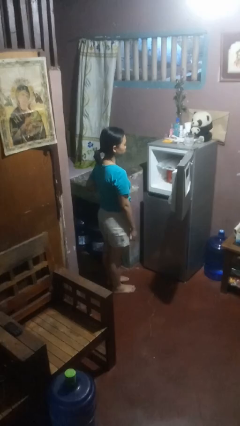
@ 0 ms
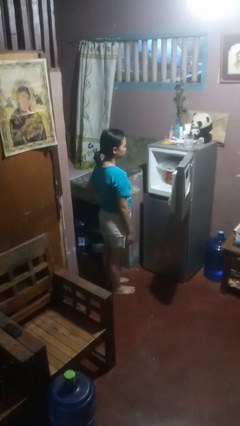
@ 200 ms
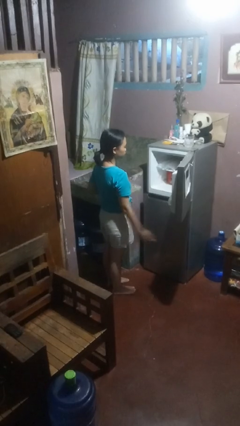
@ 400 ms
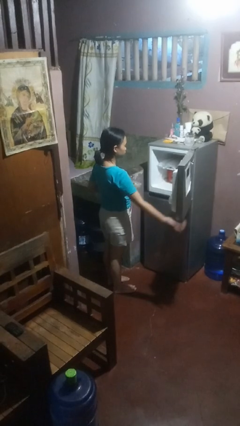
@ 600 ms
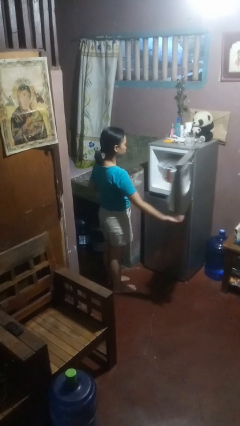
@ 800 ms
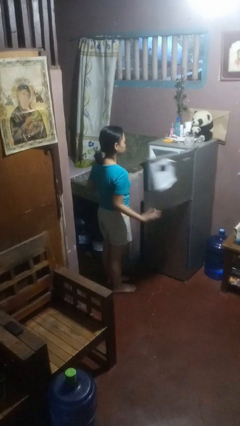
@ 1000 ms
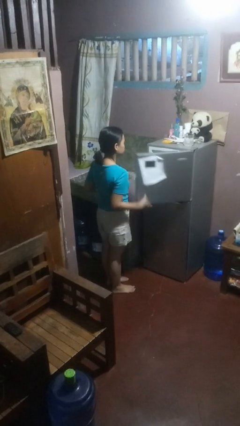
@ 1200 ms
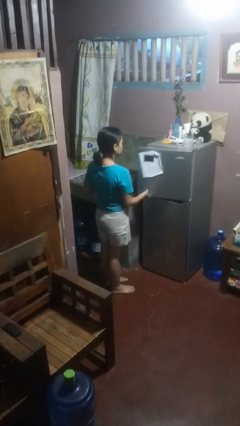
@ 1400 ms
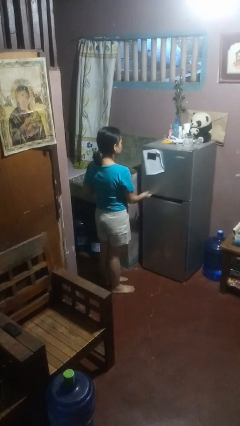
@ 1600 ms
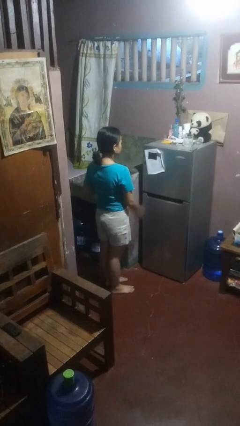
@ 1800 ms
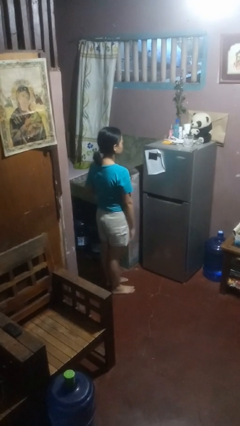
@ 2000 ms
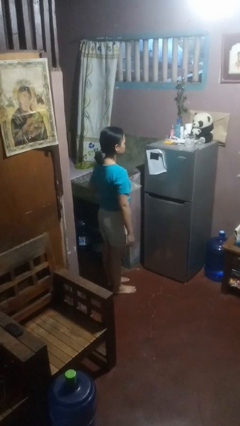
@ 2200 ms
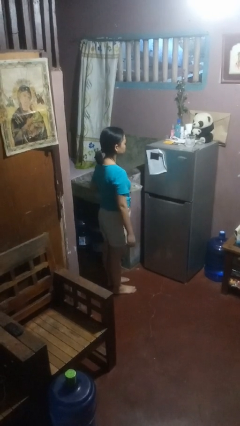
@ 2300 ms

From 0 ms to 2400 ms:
person closes refrigerator

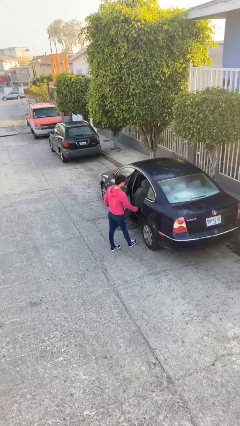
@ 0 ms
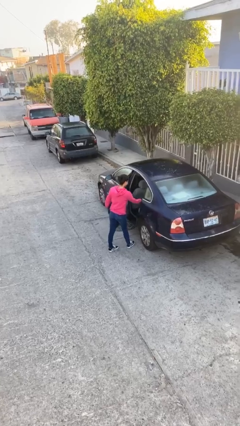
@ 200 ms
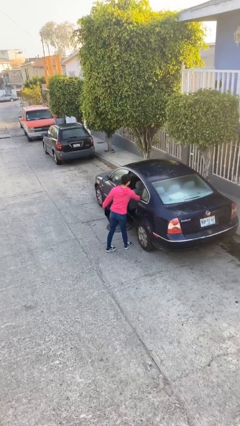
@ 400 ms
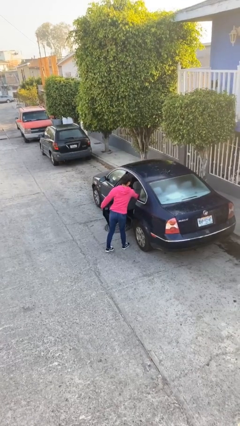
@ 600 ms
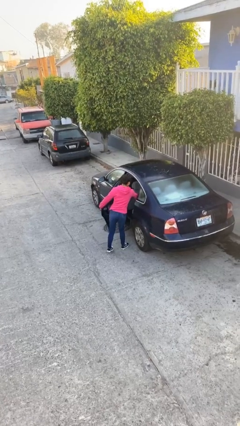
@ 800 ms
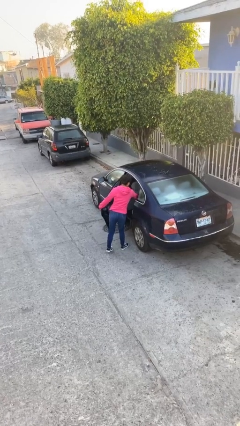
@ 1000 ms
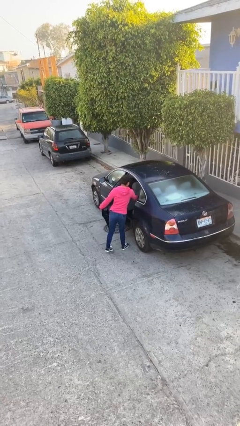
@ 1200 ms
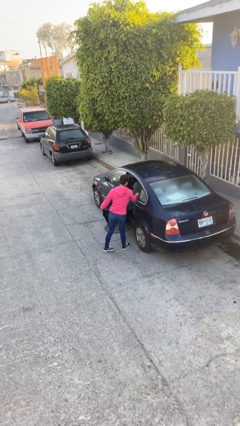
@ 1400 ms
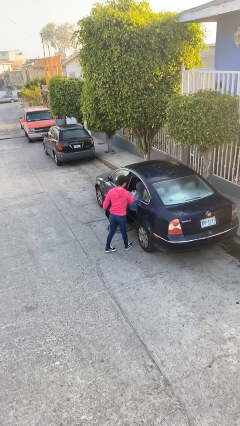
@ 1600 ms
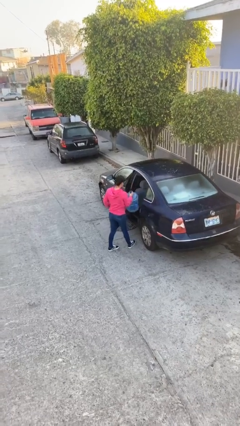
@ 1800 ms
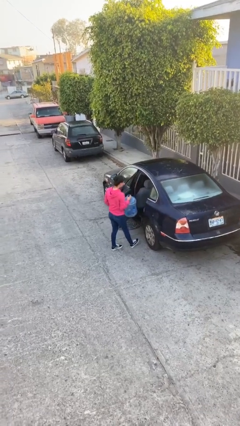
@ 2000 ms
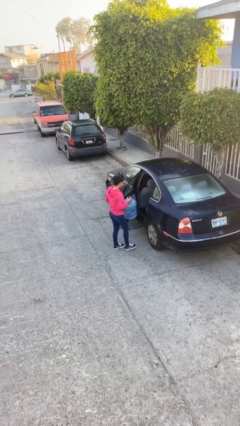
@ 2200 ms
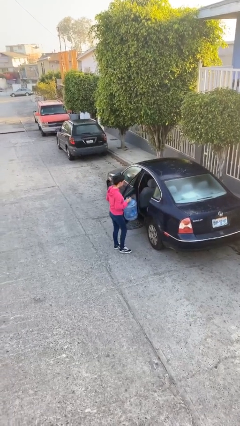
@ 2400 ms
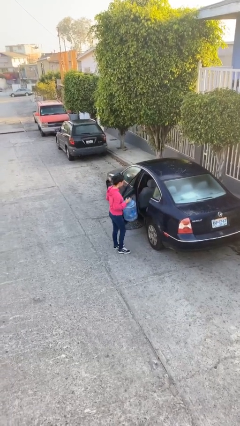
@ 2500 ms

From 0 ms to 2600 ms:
person unloads car

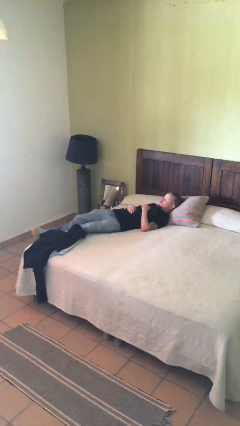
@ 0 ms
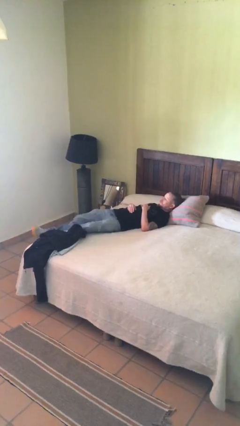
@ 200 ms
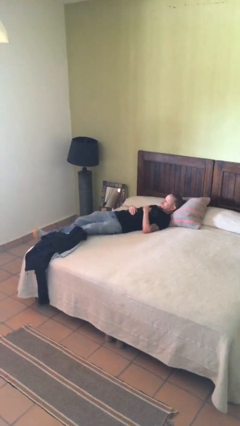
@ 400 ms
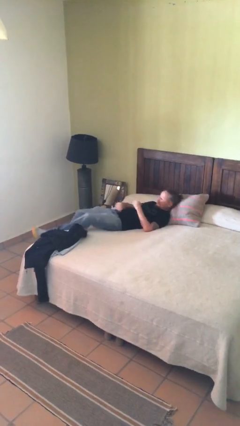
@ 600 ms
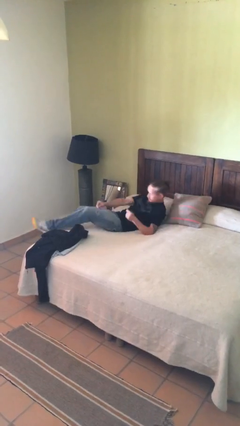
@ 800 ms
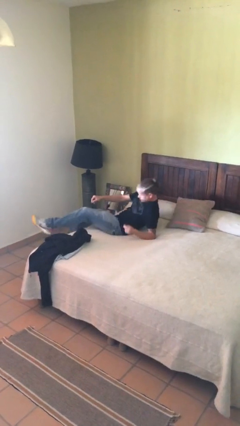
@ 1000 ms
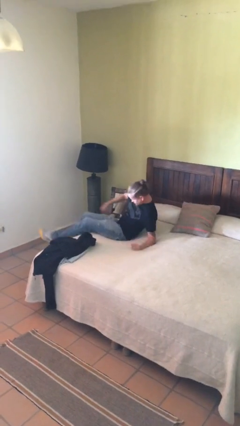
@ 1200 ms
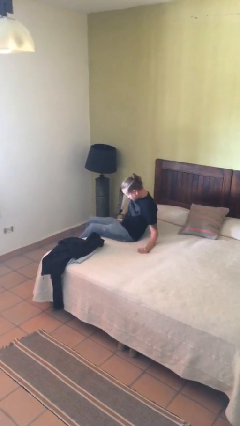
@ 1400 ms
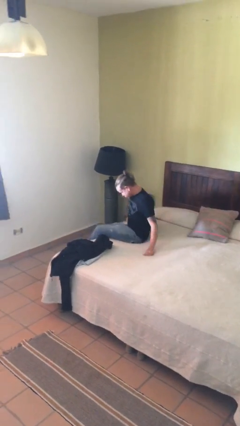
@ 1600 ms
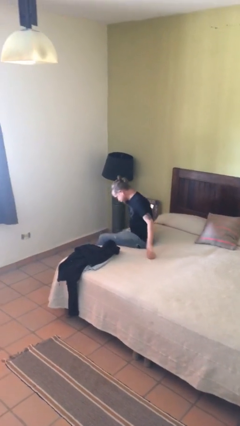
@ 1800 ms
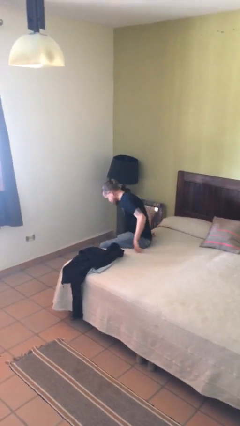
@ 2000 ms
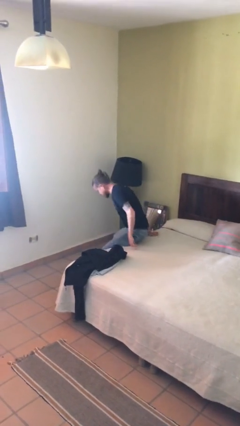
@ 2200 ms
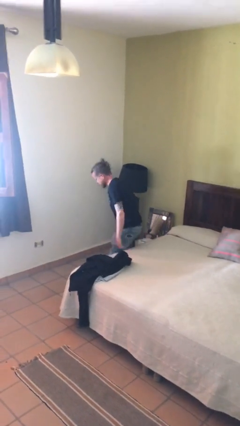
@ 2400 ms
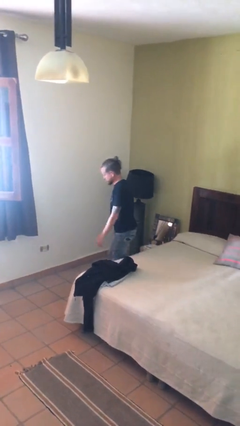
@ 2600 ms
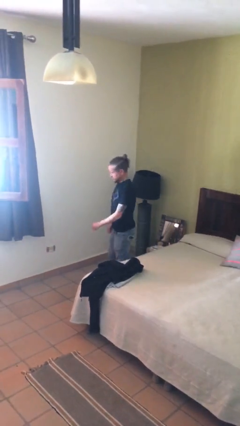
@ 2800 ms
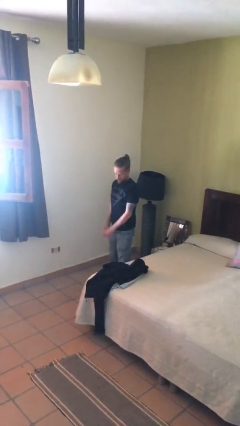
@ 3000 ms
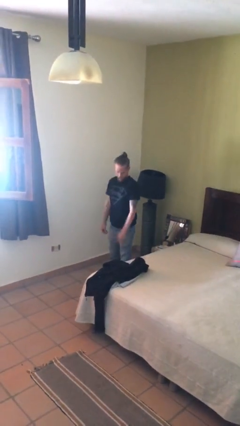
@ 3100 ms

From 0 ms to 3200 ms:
person stands up

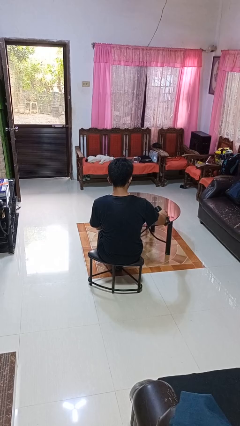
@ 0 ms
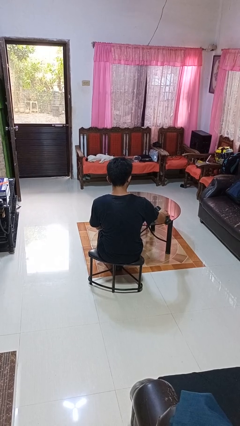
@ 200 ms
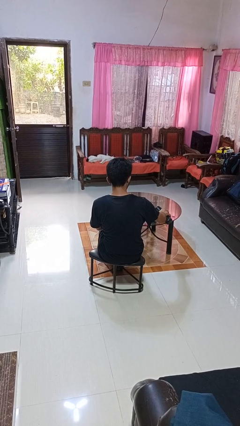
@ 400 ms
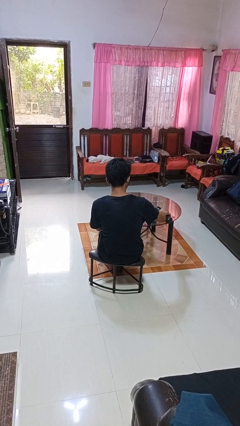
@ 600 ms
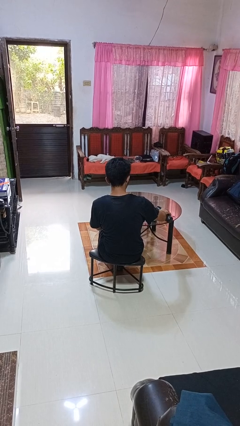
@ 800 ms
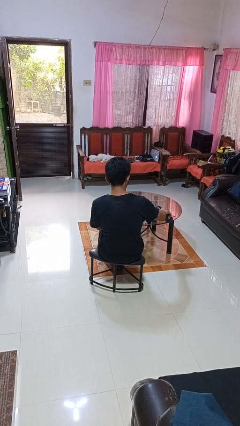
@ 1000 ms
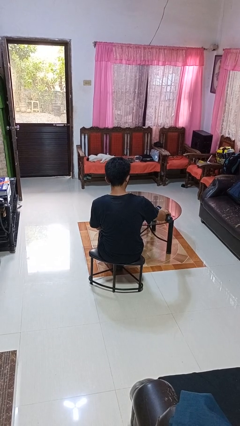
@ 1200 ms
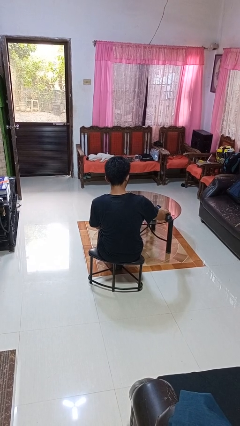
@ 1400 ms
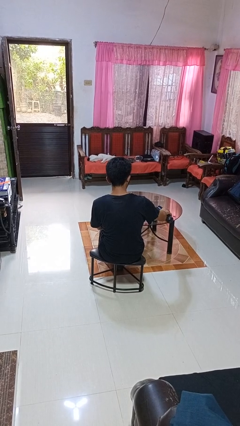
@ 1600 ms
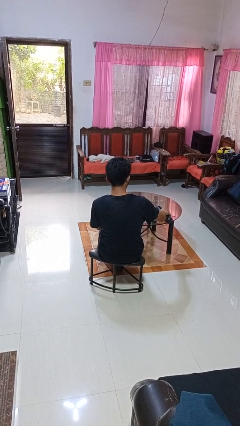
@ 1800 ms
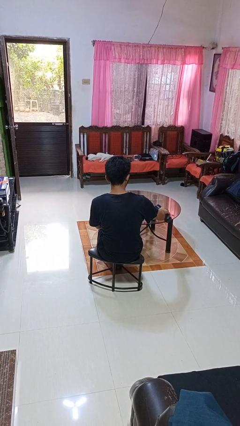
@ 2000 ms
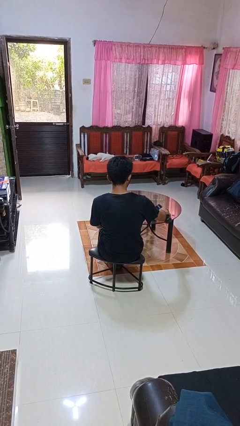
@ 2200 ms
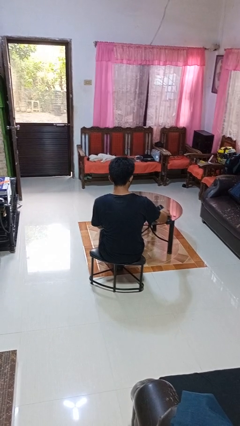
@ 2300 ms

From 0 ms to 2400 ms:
person pours liquid into cup

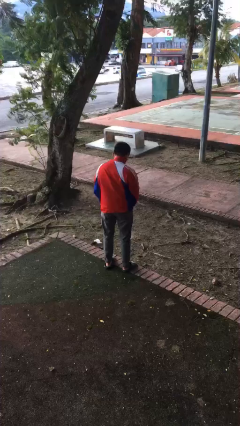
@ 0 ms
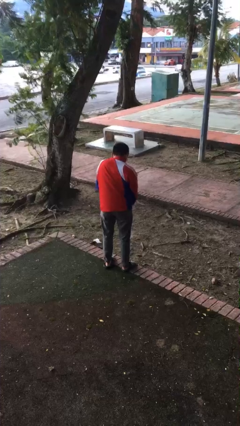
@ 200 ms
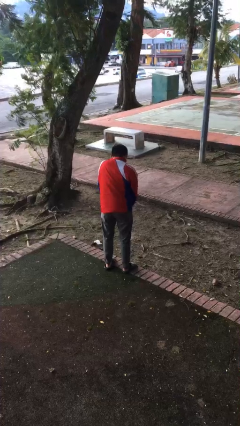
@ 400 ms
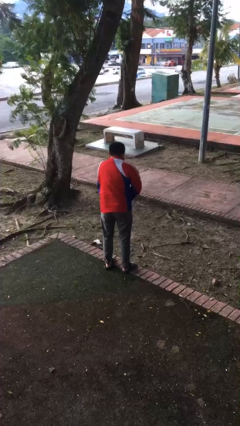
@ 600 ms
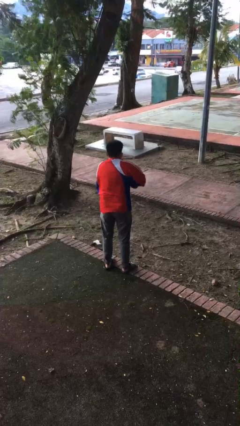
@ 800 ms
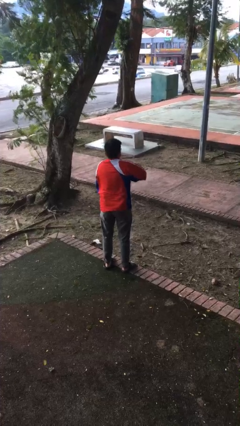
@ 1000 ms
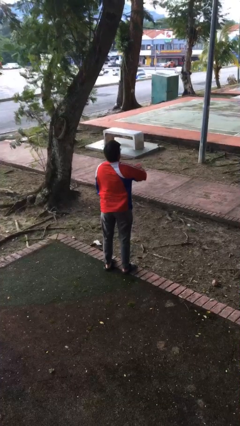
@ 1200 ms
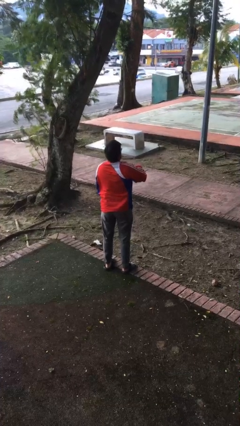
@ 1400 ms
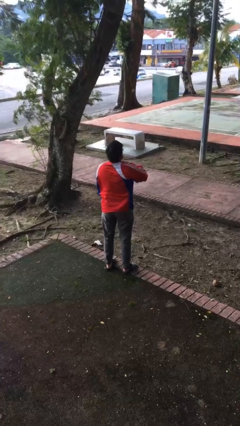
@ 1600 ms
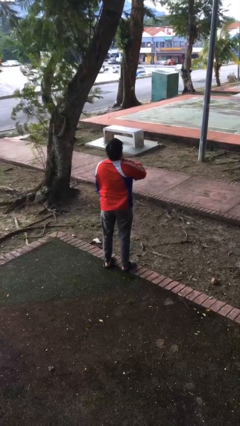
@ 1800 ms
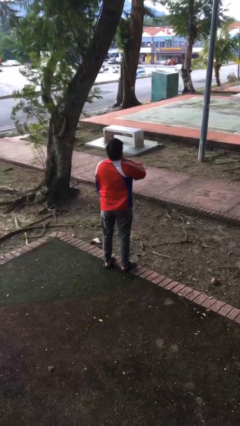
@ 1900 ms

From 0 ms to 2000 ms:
person zips up jacket

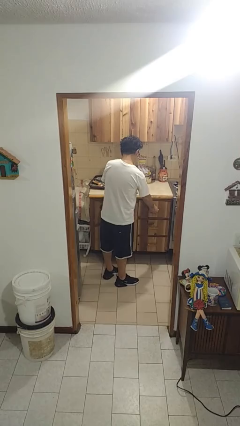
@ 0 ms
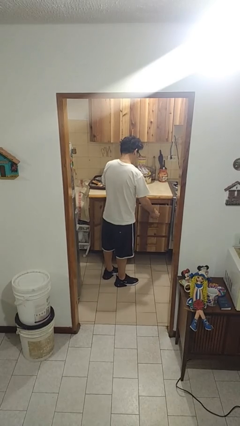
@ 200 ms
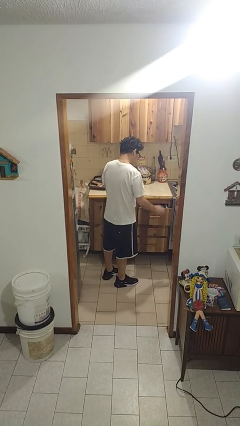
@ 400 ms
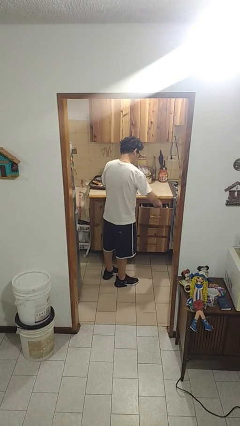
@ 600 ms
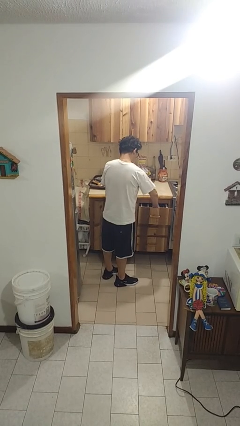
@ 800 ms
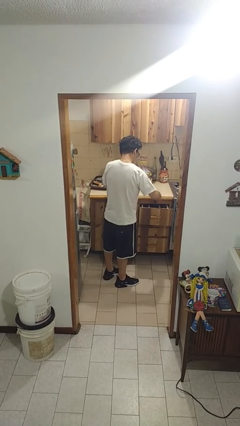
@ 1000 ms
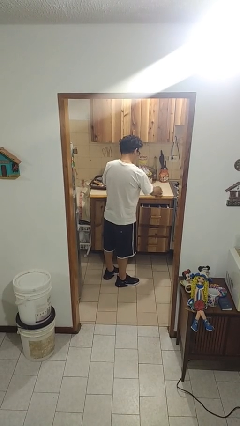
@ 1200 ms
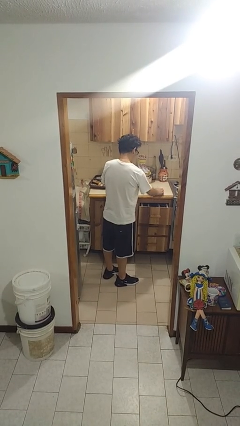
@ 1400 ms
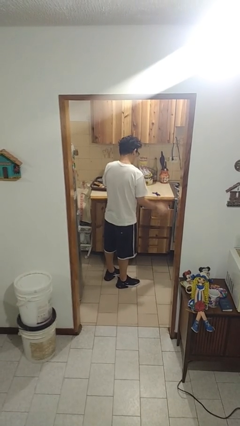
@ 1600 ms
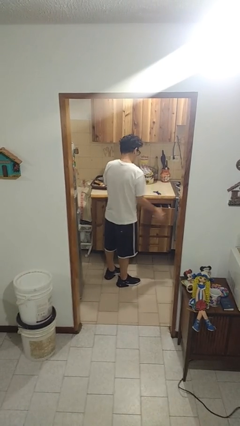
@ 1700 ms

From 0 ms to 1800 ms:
person takes object from kitchen drawer

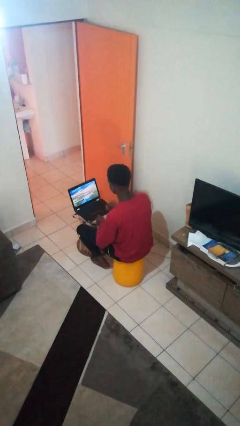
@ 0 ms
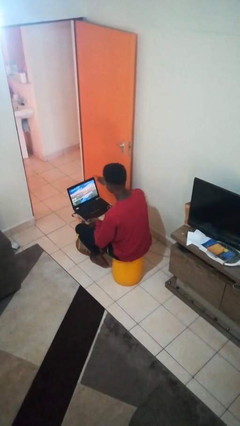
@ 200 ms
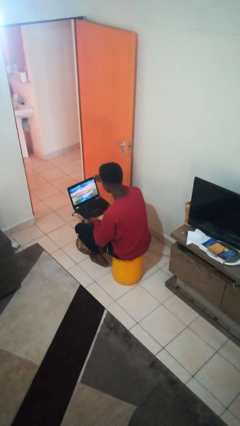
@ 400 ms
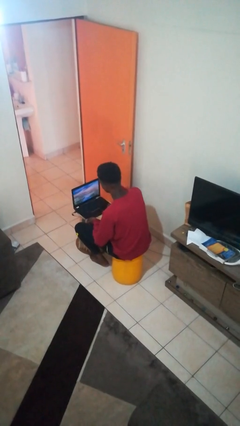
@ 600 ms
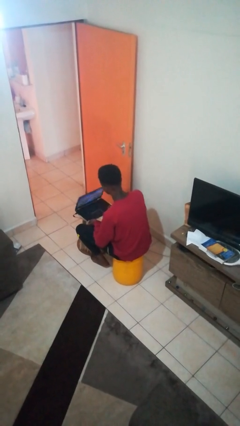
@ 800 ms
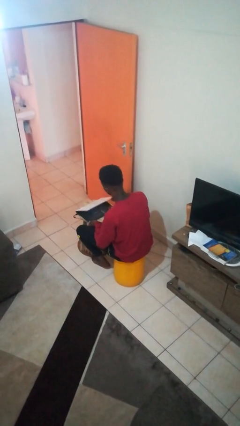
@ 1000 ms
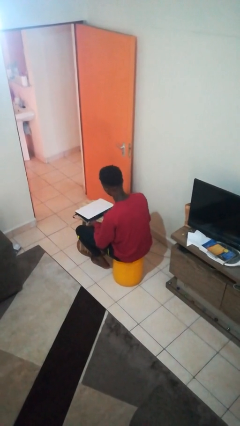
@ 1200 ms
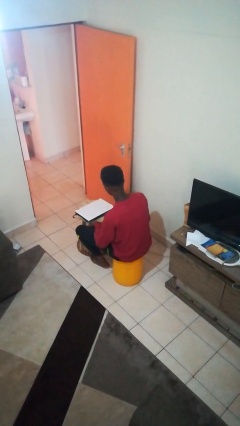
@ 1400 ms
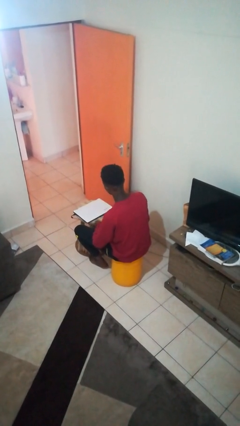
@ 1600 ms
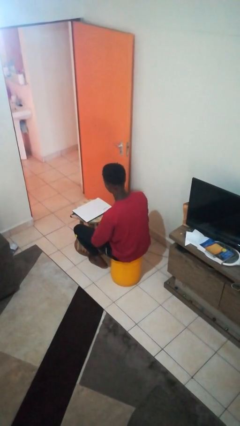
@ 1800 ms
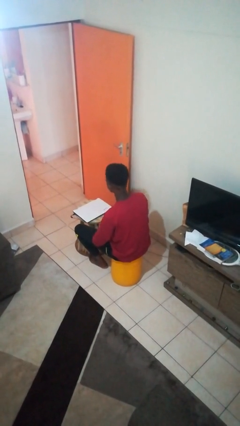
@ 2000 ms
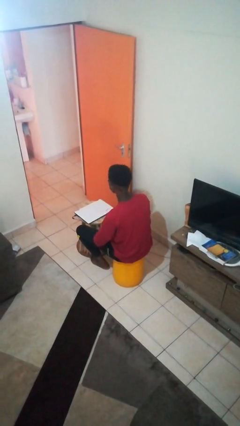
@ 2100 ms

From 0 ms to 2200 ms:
person closes laptop
